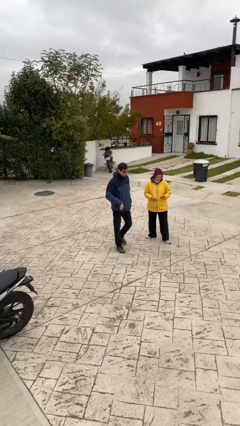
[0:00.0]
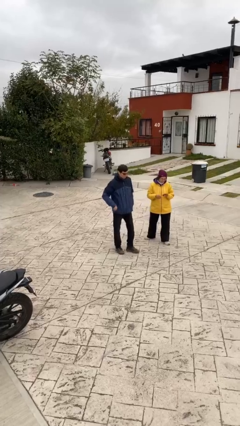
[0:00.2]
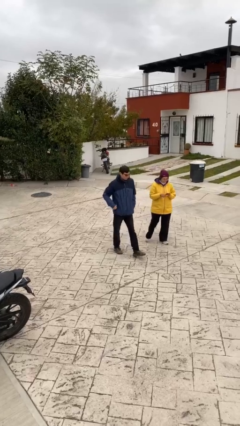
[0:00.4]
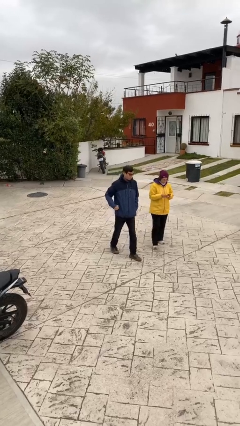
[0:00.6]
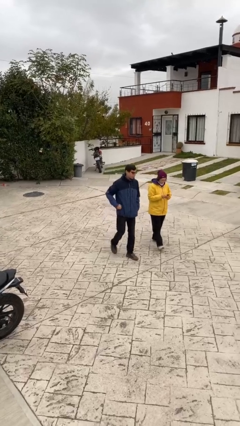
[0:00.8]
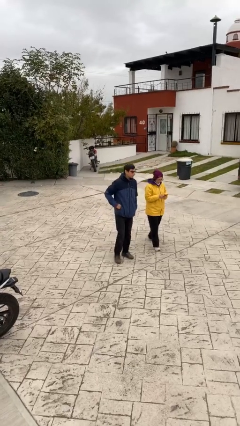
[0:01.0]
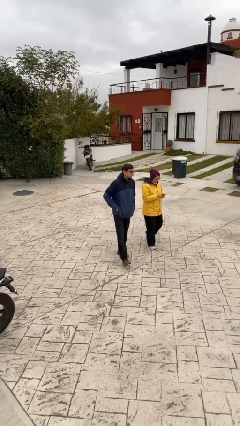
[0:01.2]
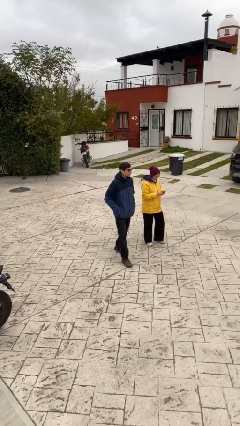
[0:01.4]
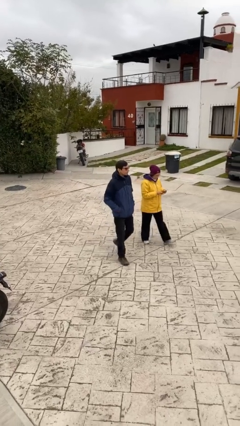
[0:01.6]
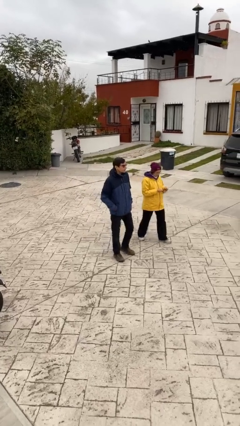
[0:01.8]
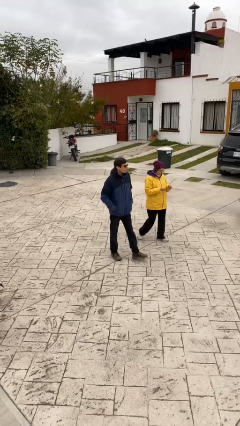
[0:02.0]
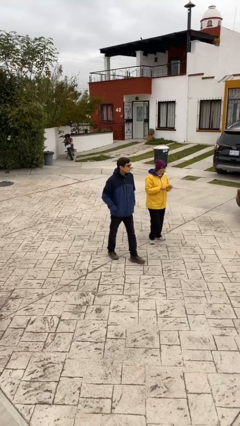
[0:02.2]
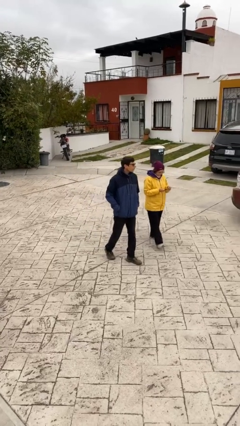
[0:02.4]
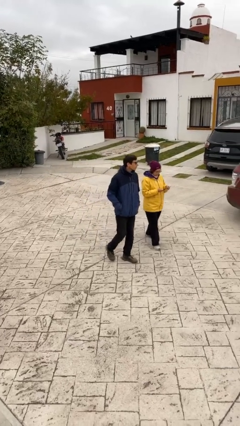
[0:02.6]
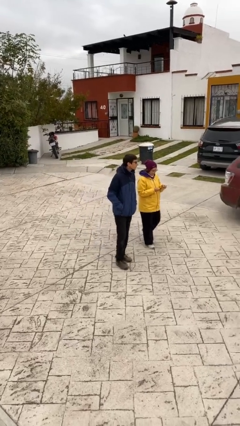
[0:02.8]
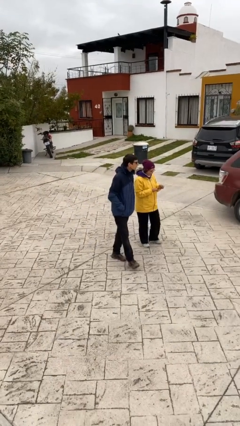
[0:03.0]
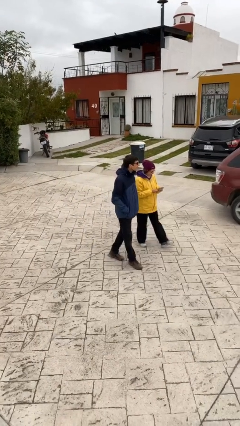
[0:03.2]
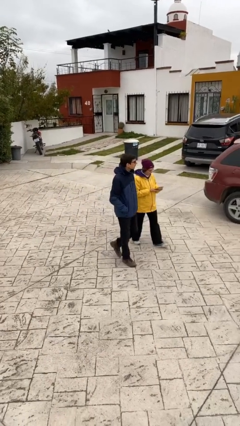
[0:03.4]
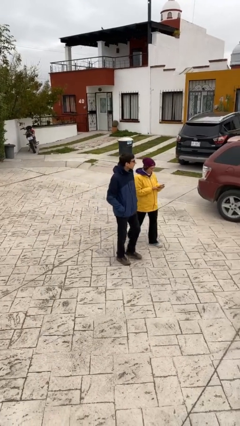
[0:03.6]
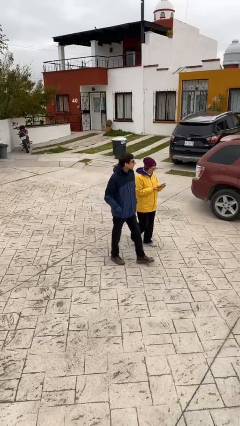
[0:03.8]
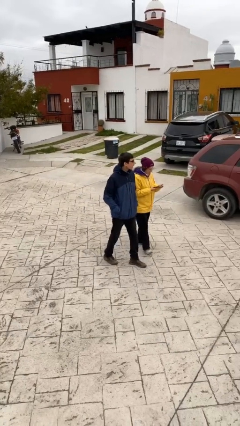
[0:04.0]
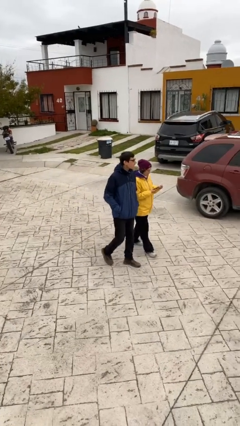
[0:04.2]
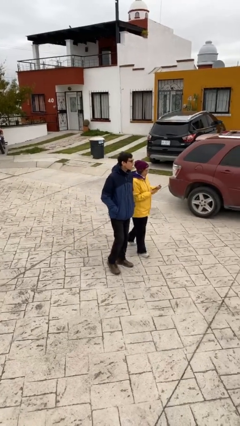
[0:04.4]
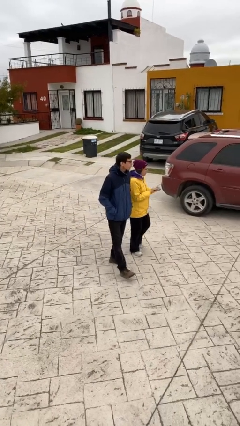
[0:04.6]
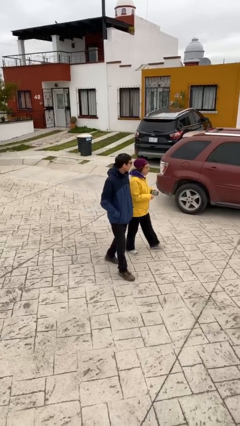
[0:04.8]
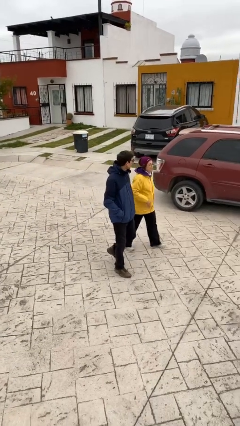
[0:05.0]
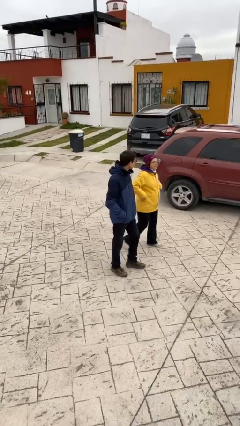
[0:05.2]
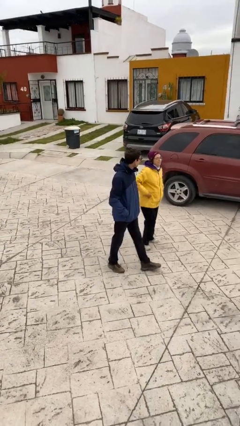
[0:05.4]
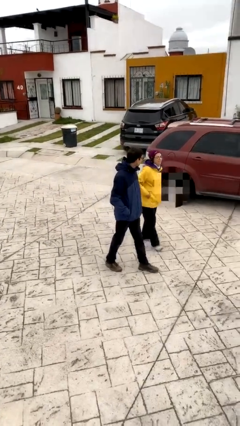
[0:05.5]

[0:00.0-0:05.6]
person talks to person

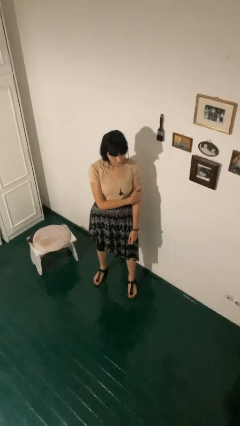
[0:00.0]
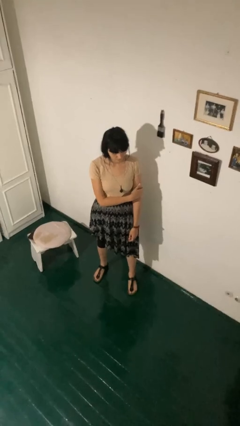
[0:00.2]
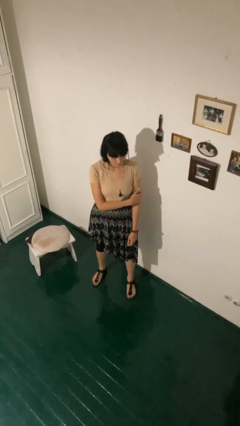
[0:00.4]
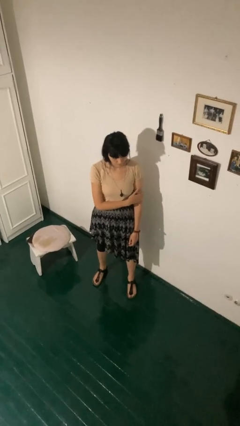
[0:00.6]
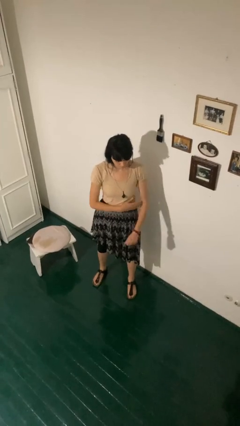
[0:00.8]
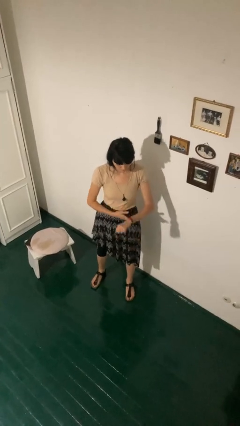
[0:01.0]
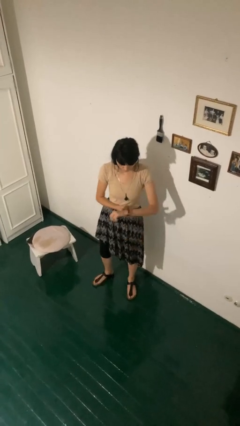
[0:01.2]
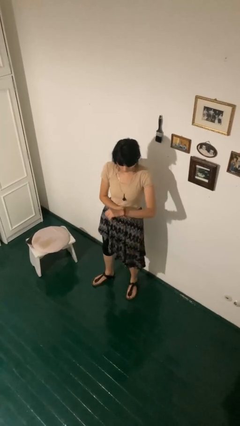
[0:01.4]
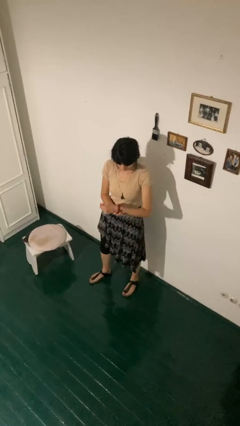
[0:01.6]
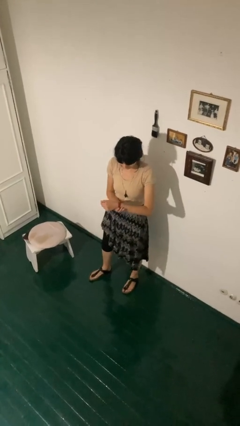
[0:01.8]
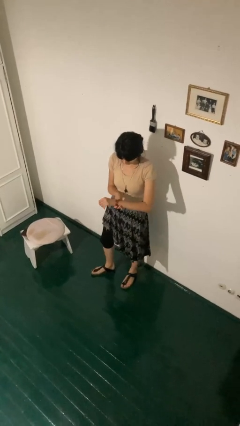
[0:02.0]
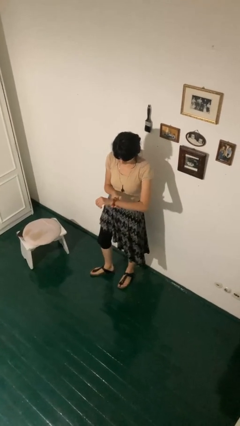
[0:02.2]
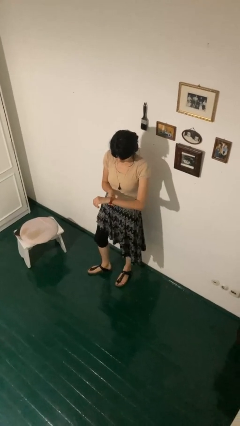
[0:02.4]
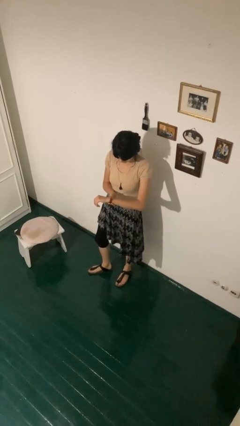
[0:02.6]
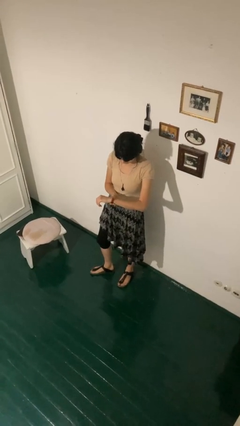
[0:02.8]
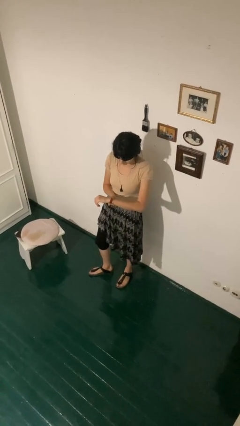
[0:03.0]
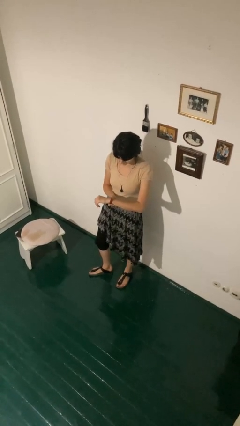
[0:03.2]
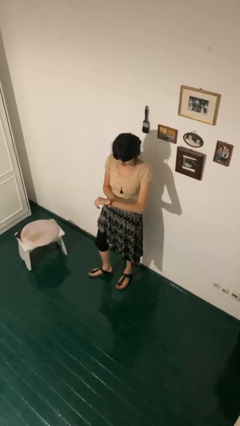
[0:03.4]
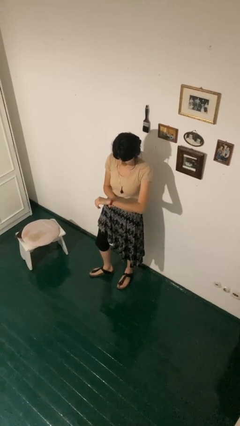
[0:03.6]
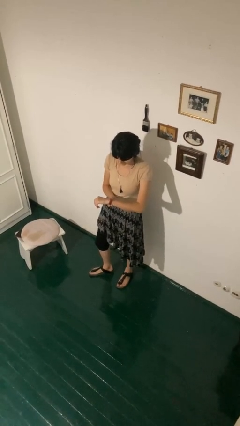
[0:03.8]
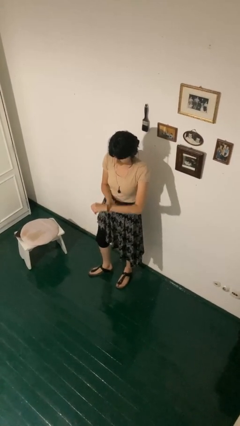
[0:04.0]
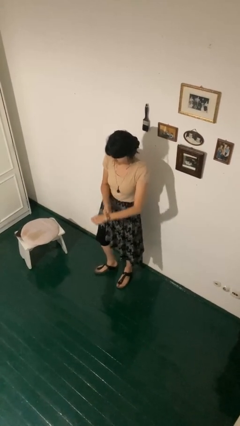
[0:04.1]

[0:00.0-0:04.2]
person looks at wristwatch

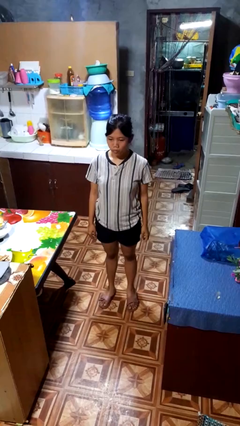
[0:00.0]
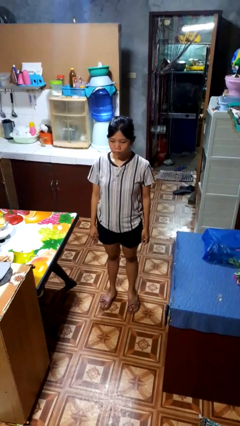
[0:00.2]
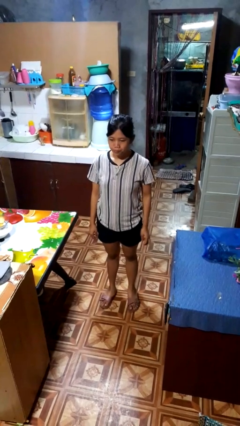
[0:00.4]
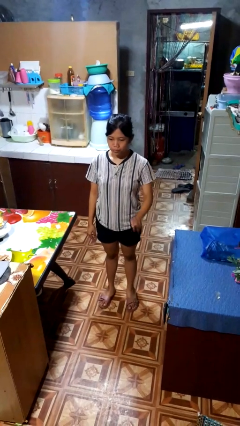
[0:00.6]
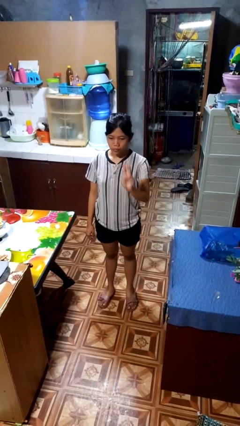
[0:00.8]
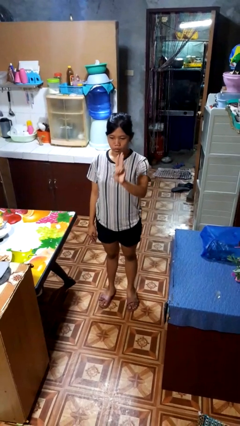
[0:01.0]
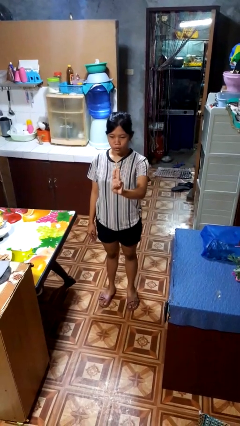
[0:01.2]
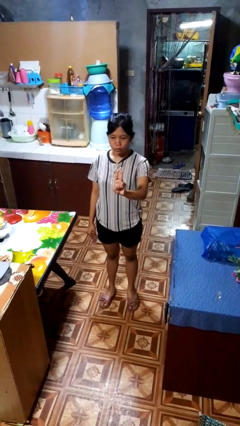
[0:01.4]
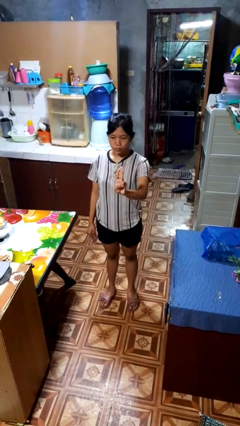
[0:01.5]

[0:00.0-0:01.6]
person gestures number three

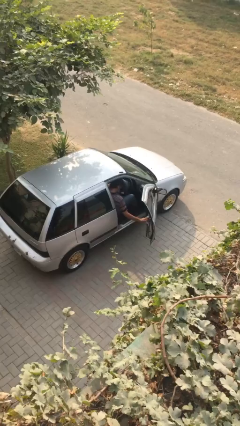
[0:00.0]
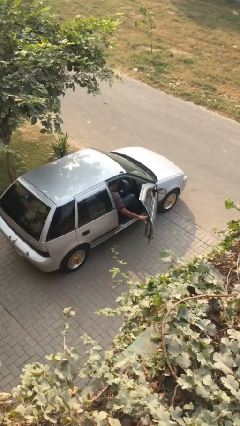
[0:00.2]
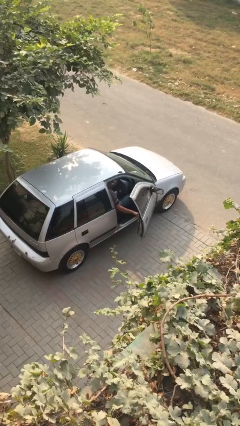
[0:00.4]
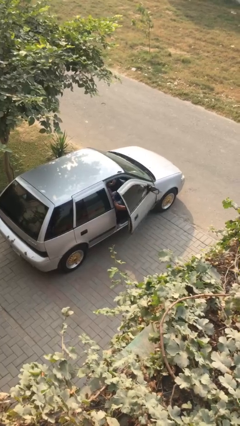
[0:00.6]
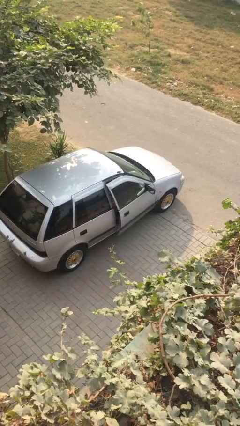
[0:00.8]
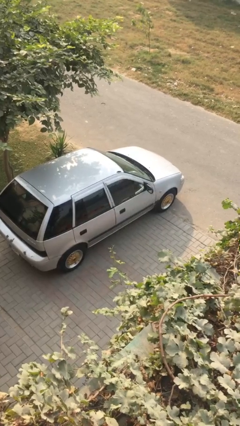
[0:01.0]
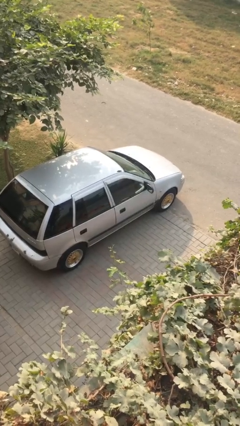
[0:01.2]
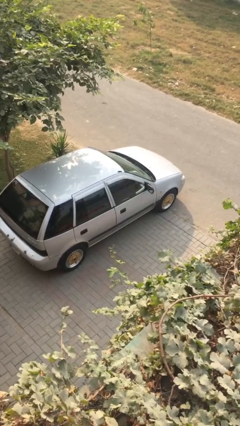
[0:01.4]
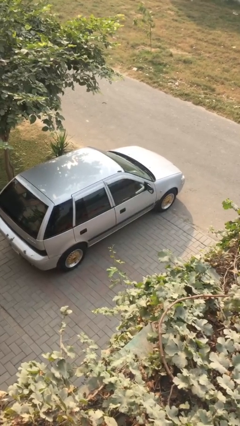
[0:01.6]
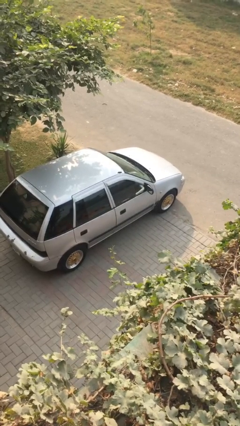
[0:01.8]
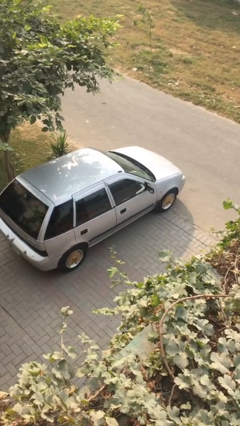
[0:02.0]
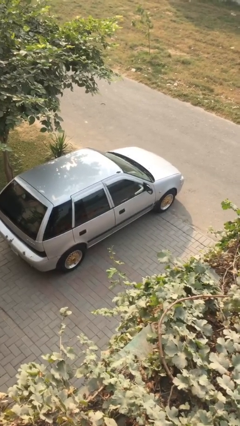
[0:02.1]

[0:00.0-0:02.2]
person closes car door

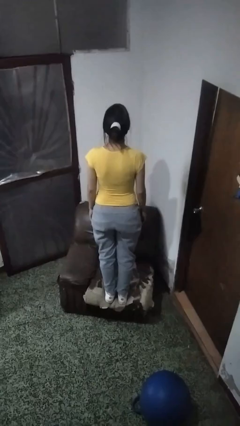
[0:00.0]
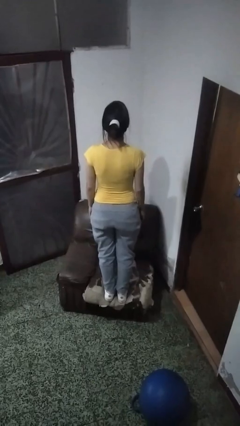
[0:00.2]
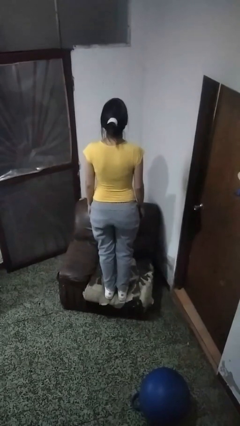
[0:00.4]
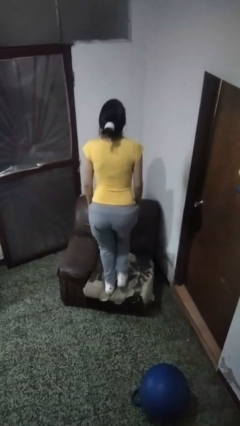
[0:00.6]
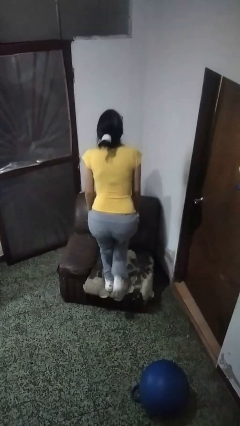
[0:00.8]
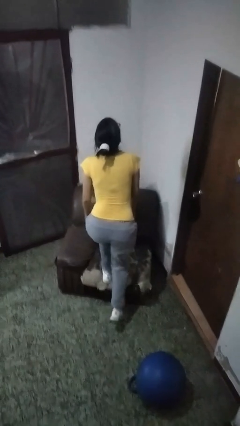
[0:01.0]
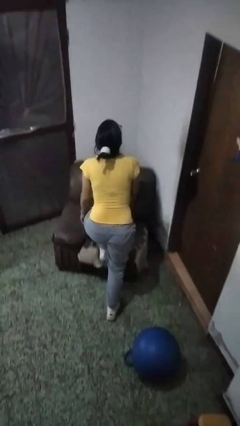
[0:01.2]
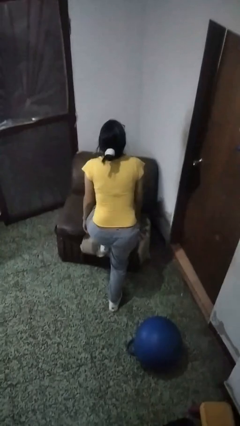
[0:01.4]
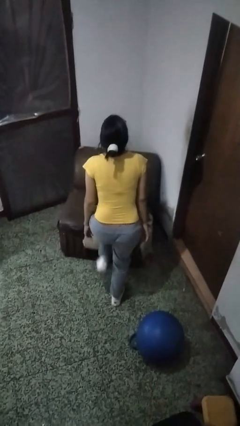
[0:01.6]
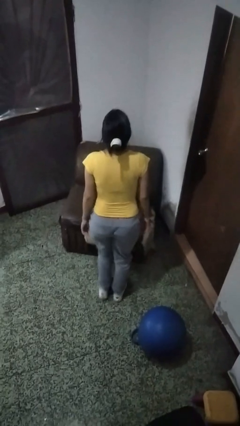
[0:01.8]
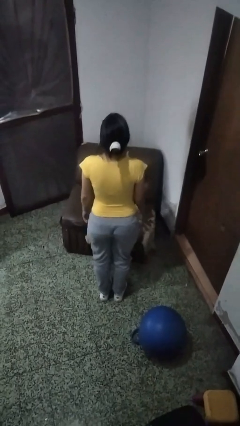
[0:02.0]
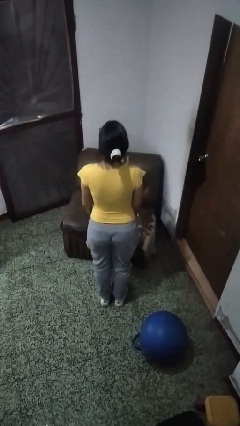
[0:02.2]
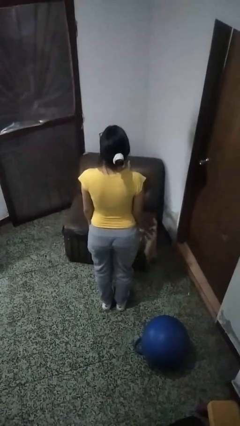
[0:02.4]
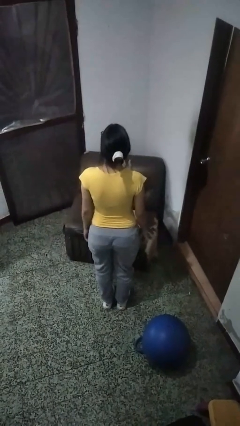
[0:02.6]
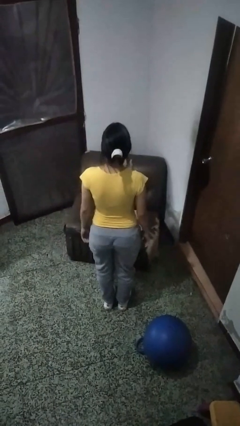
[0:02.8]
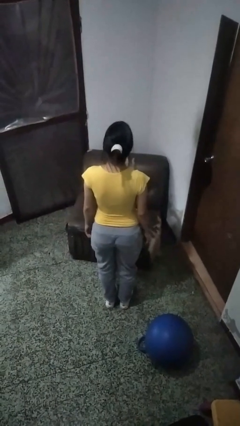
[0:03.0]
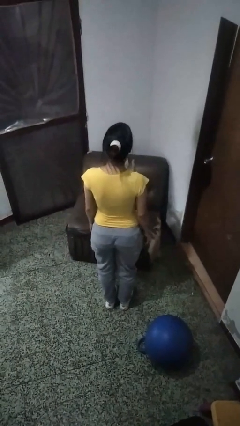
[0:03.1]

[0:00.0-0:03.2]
person climbs off couch

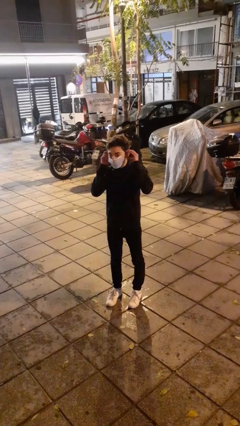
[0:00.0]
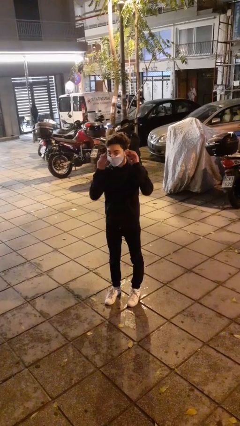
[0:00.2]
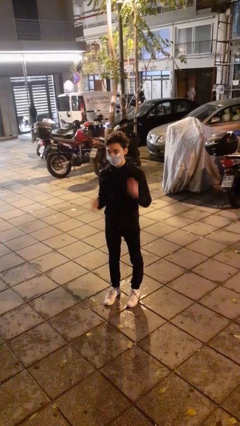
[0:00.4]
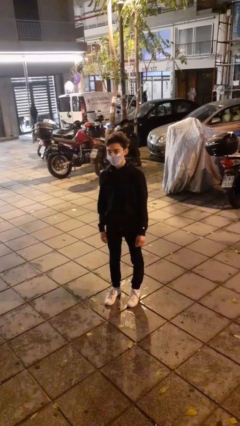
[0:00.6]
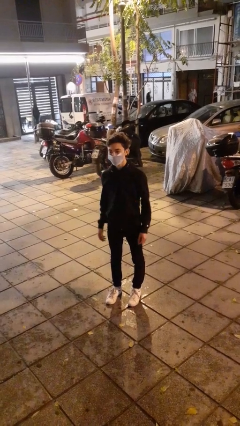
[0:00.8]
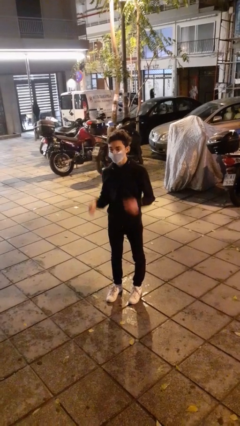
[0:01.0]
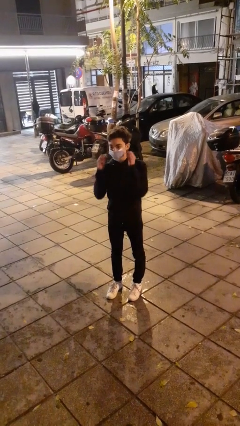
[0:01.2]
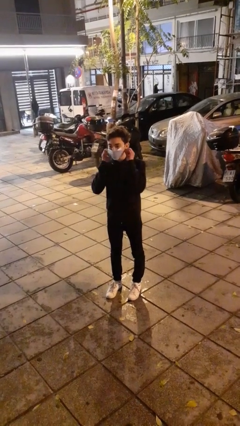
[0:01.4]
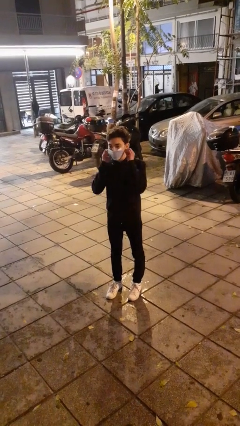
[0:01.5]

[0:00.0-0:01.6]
person puts on facemask
